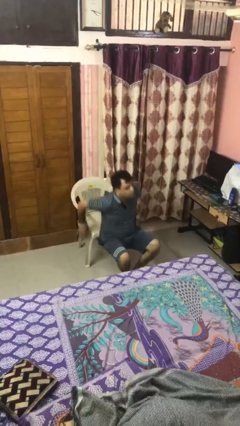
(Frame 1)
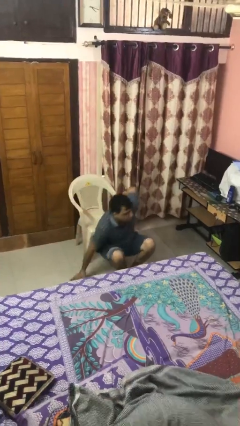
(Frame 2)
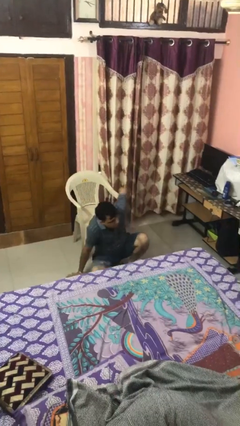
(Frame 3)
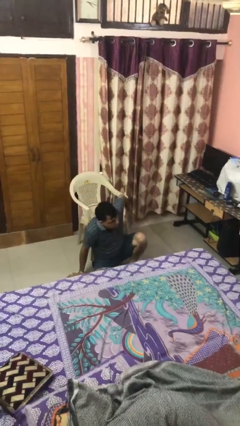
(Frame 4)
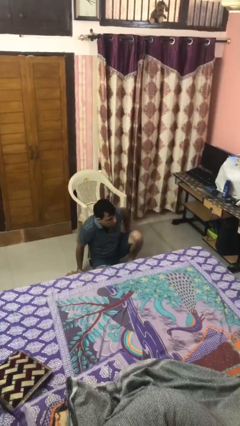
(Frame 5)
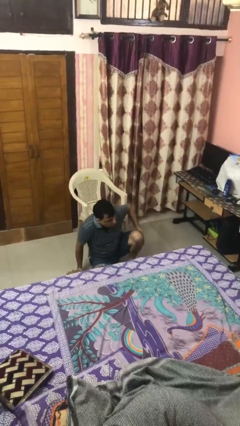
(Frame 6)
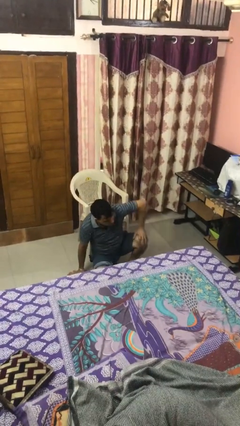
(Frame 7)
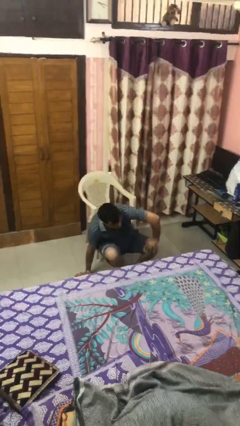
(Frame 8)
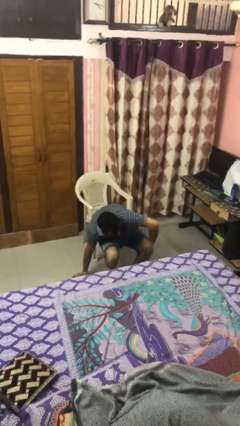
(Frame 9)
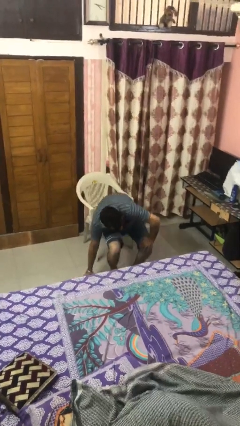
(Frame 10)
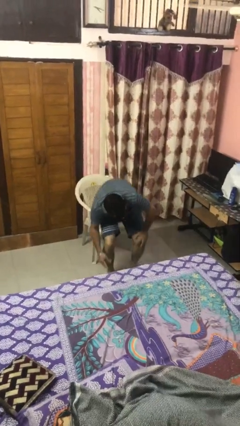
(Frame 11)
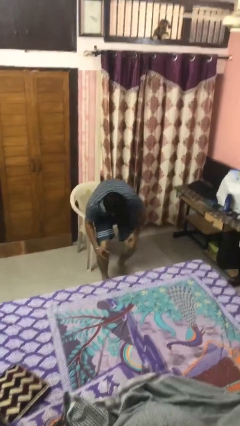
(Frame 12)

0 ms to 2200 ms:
person stands up from floor

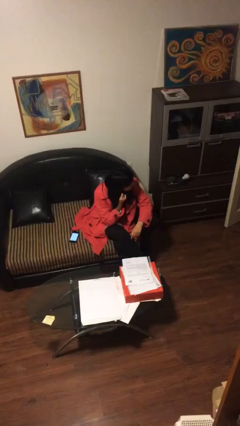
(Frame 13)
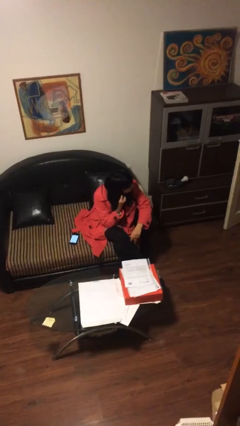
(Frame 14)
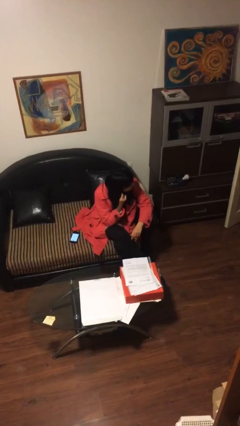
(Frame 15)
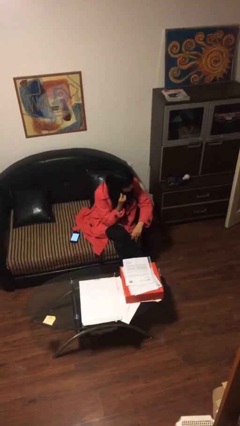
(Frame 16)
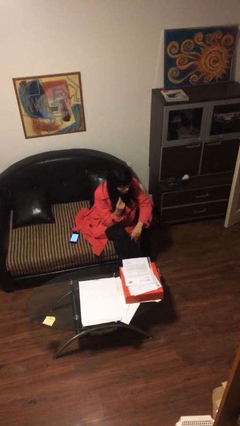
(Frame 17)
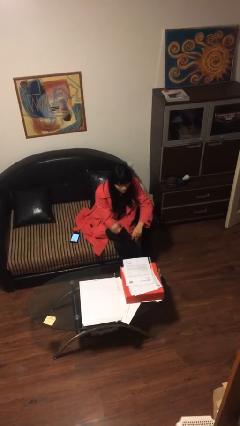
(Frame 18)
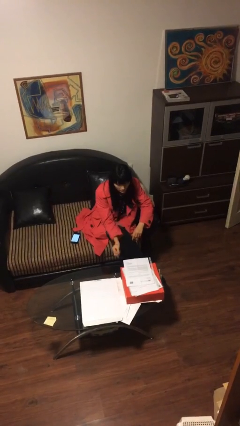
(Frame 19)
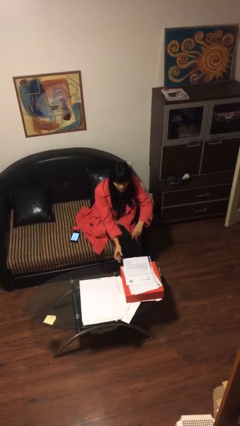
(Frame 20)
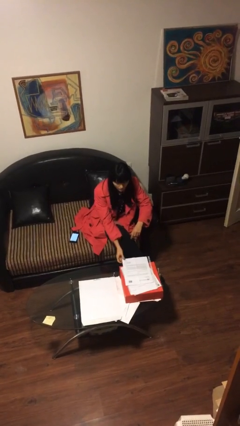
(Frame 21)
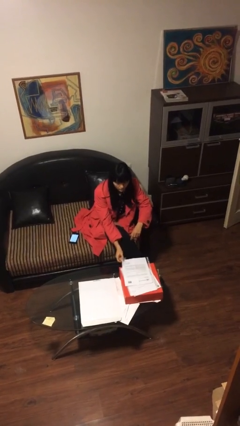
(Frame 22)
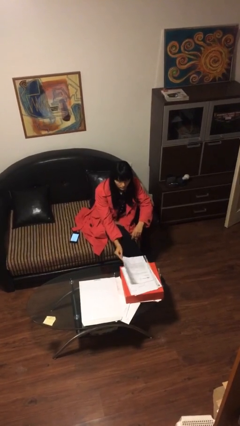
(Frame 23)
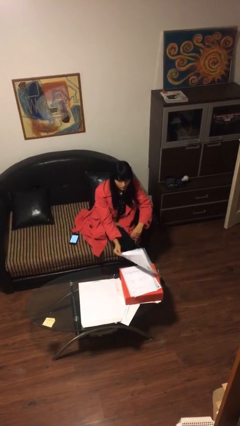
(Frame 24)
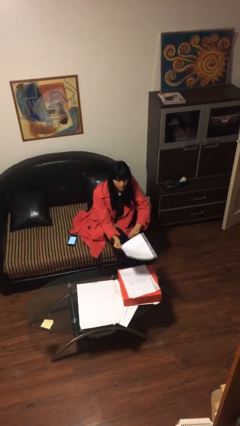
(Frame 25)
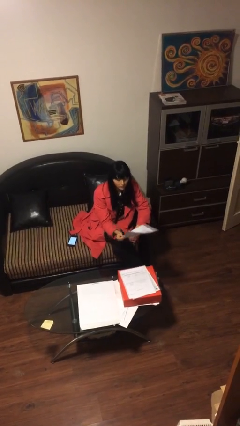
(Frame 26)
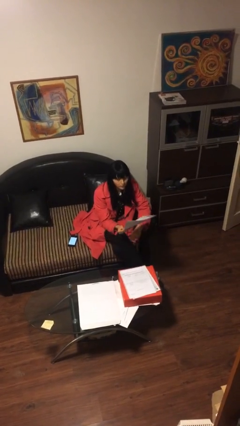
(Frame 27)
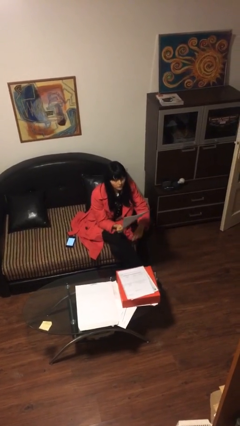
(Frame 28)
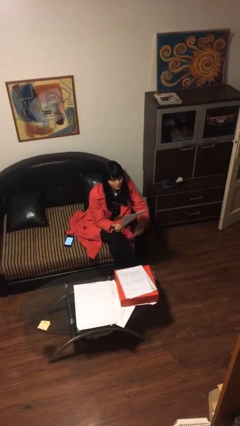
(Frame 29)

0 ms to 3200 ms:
person picks up object from table

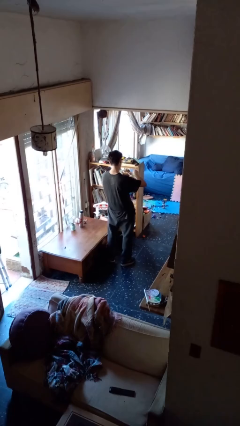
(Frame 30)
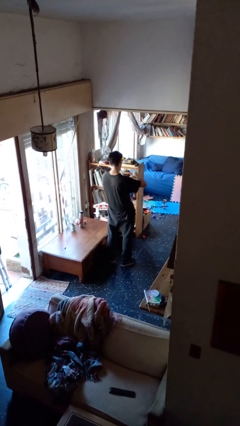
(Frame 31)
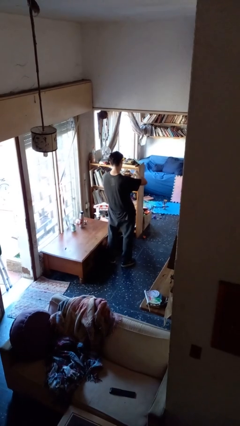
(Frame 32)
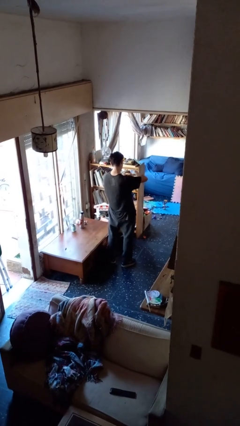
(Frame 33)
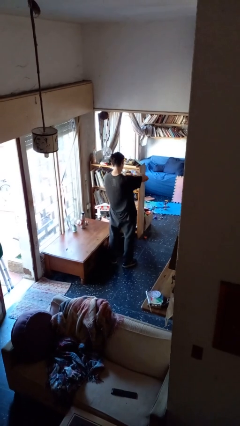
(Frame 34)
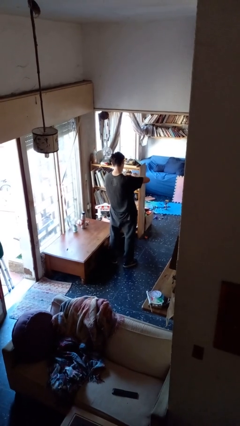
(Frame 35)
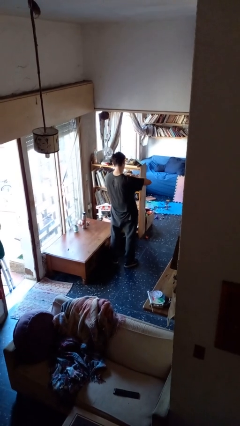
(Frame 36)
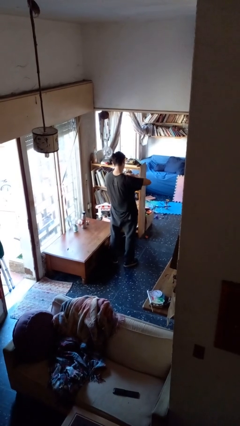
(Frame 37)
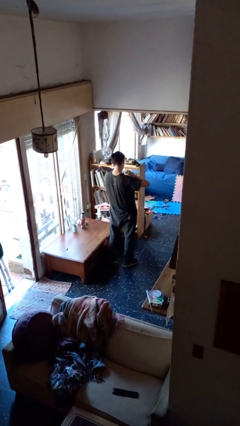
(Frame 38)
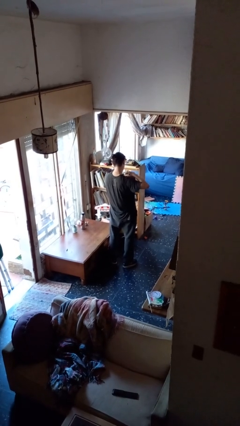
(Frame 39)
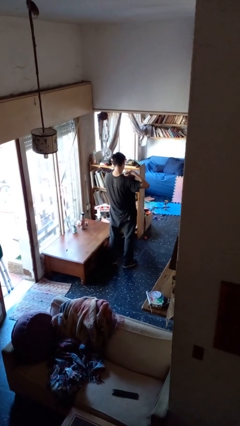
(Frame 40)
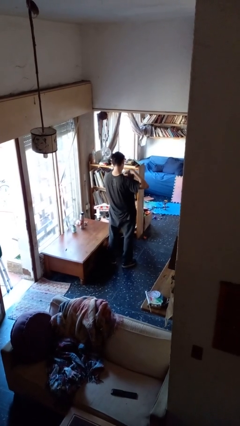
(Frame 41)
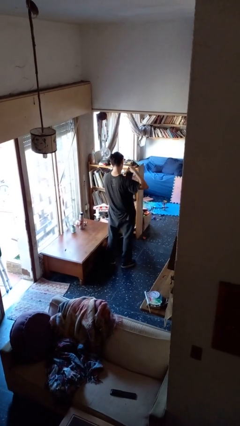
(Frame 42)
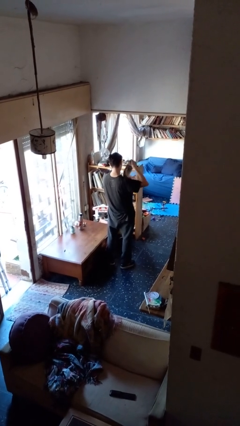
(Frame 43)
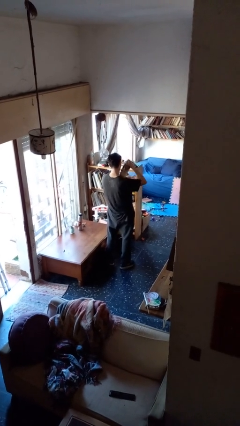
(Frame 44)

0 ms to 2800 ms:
person tears paper

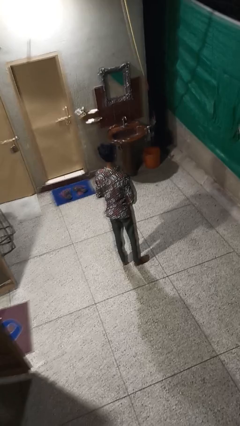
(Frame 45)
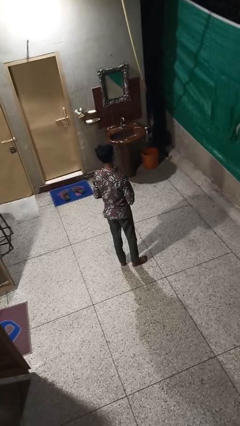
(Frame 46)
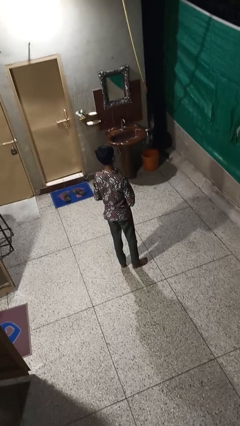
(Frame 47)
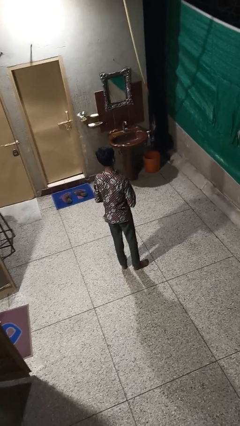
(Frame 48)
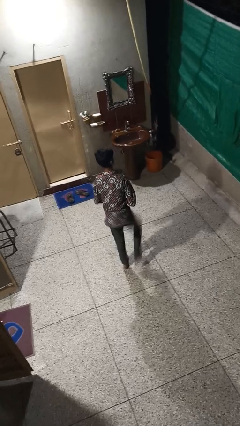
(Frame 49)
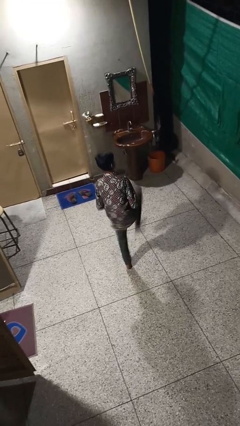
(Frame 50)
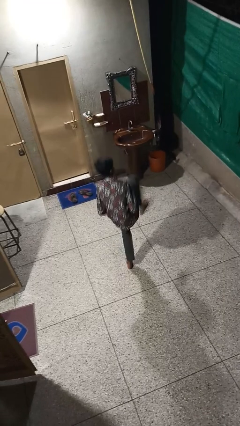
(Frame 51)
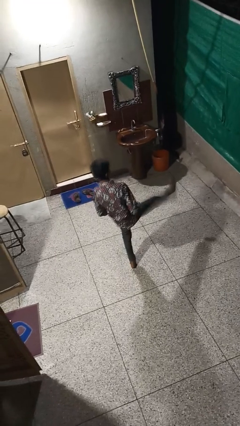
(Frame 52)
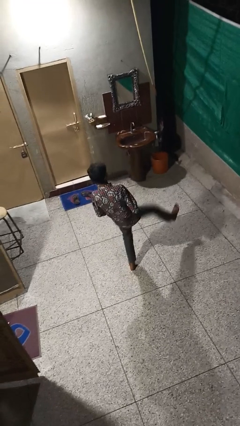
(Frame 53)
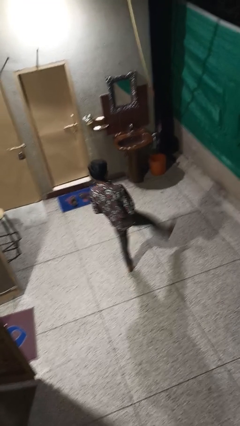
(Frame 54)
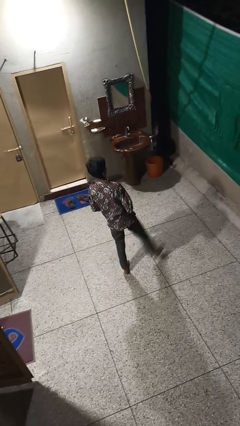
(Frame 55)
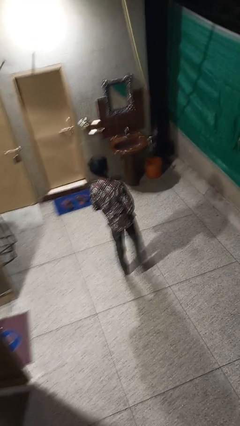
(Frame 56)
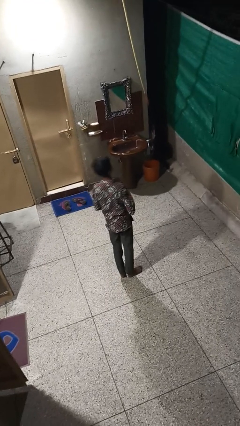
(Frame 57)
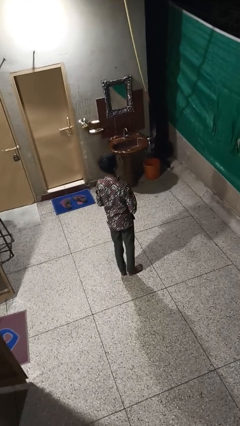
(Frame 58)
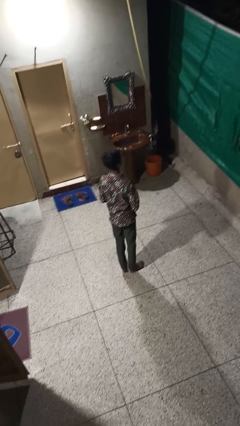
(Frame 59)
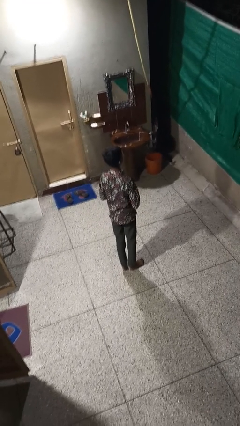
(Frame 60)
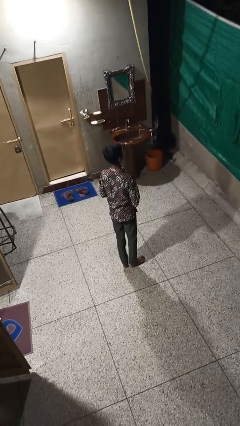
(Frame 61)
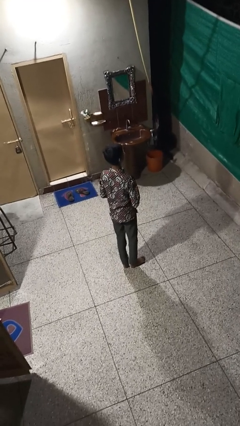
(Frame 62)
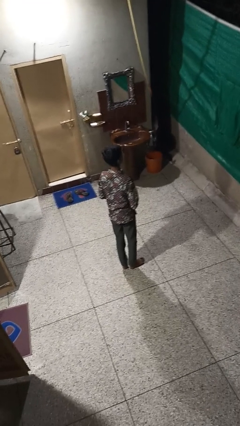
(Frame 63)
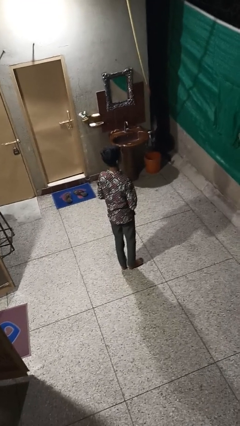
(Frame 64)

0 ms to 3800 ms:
person karate kicks

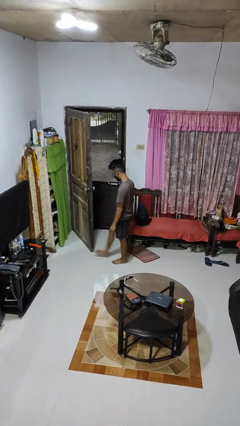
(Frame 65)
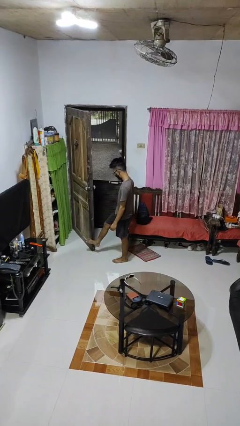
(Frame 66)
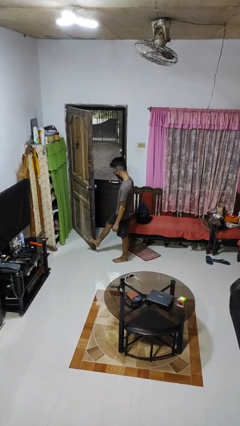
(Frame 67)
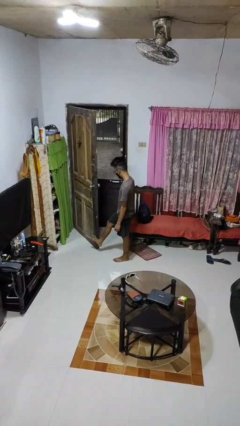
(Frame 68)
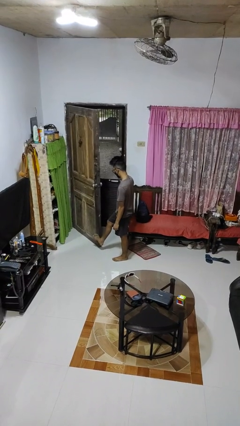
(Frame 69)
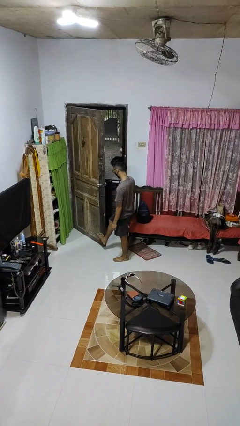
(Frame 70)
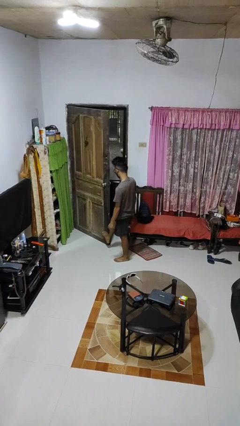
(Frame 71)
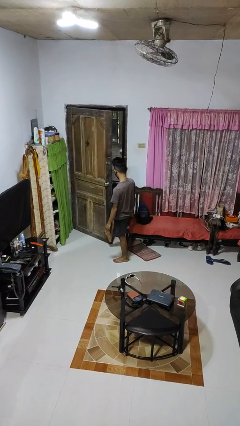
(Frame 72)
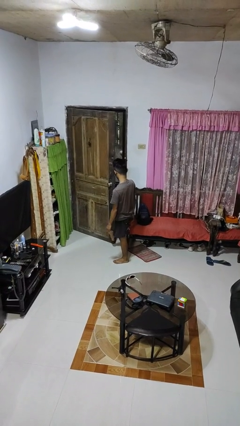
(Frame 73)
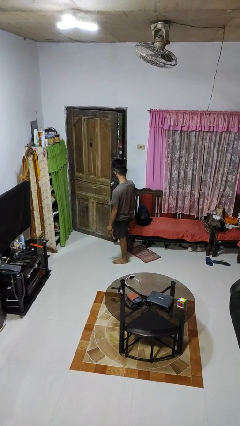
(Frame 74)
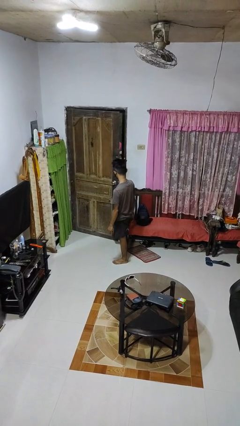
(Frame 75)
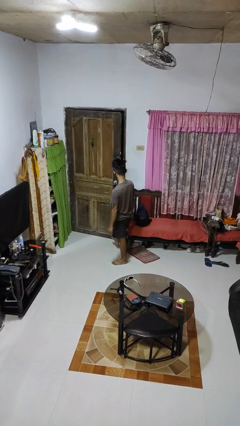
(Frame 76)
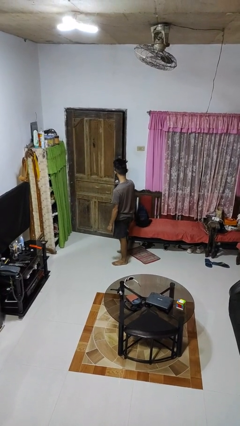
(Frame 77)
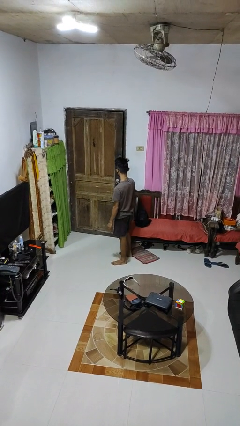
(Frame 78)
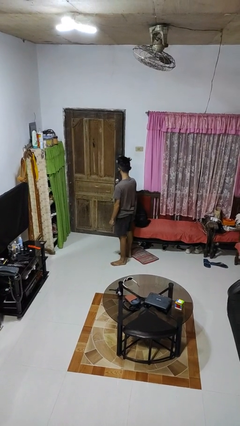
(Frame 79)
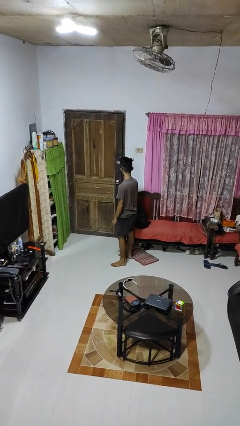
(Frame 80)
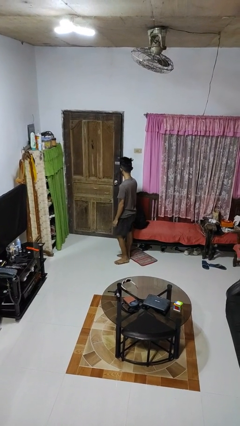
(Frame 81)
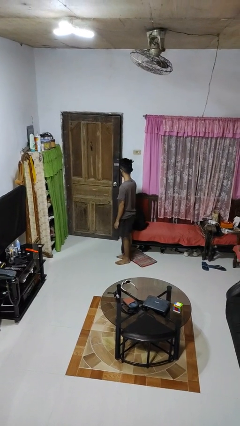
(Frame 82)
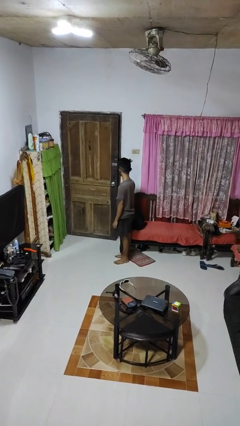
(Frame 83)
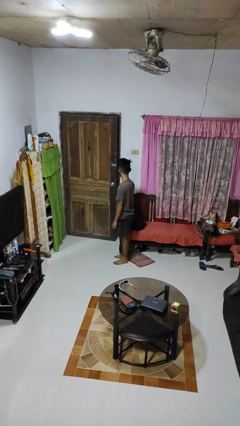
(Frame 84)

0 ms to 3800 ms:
person closes door with foot

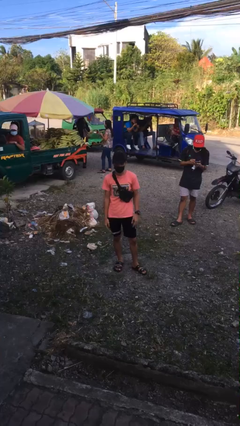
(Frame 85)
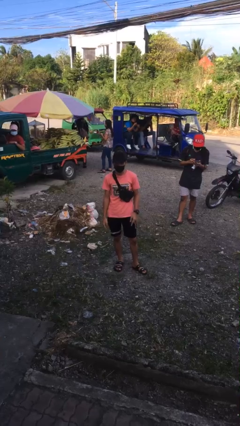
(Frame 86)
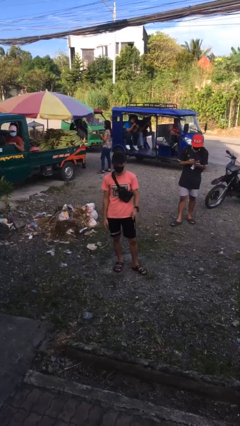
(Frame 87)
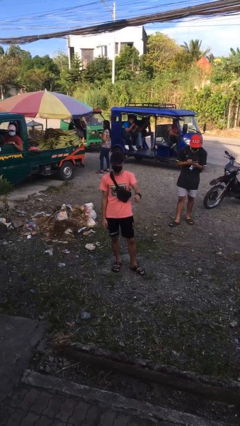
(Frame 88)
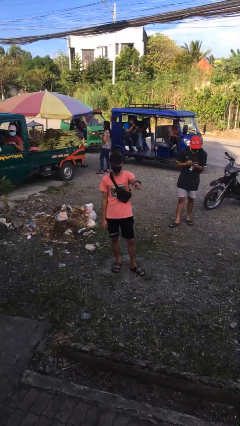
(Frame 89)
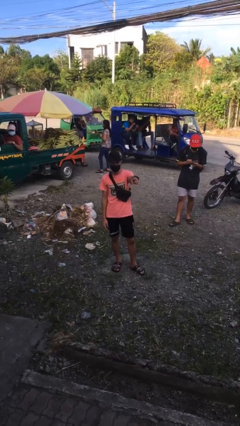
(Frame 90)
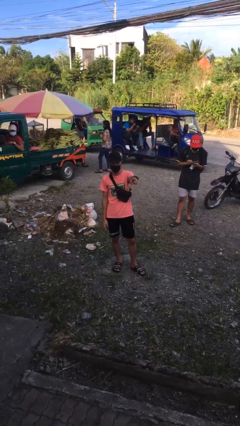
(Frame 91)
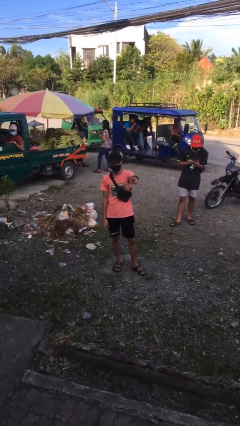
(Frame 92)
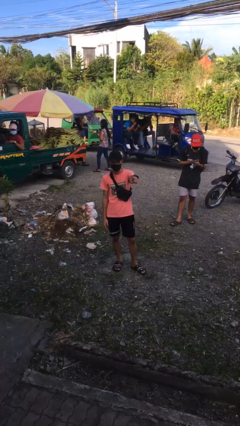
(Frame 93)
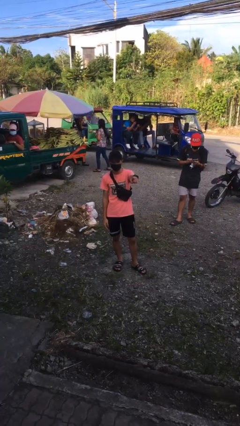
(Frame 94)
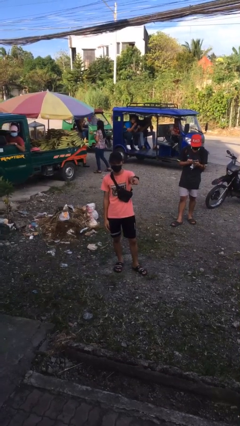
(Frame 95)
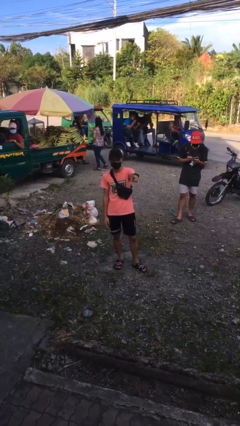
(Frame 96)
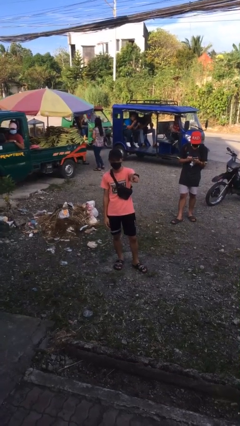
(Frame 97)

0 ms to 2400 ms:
person points at person
